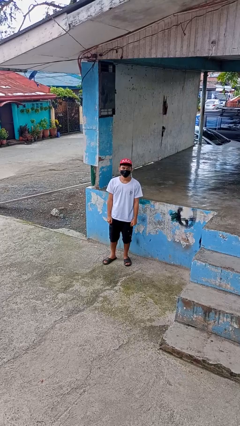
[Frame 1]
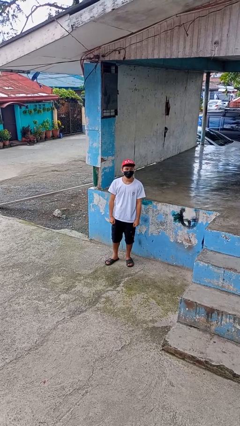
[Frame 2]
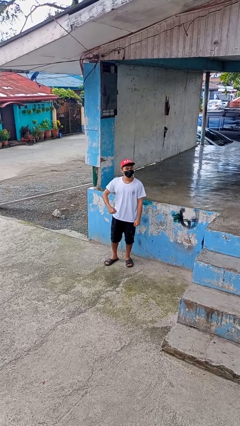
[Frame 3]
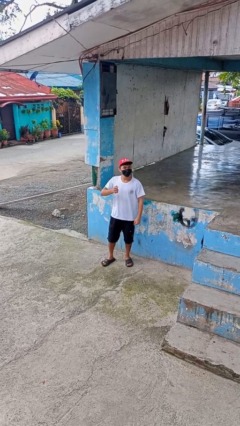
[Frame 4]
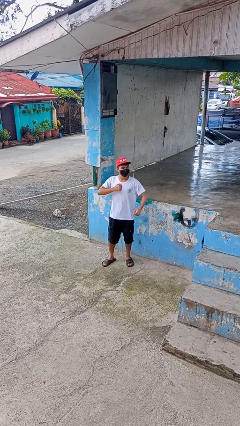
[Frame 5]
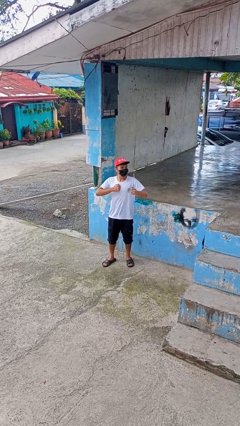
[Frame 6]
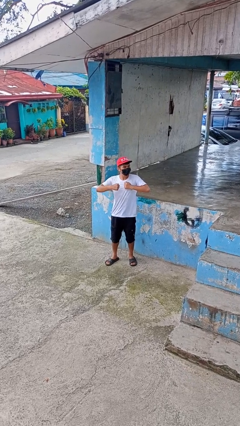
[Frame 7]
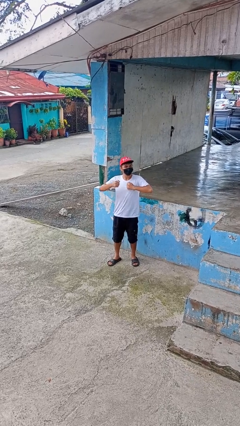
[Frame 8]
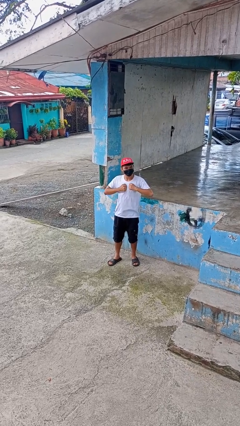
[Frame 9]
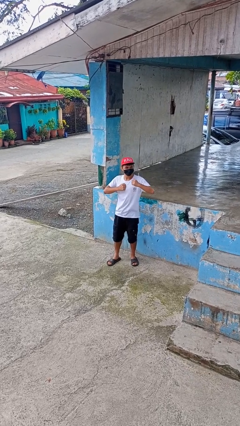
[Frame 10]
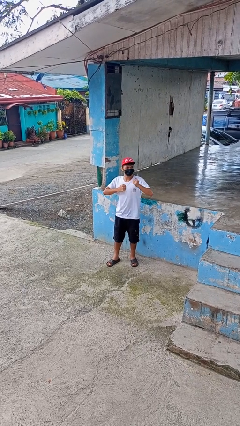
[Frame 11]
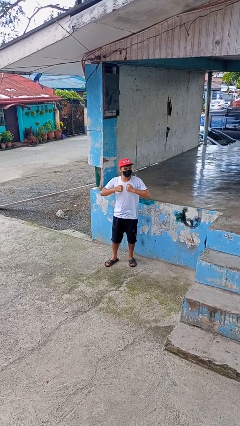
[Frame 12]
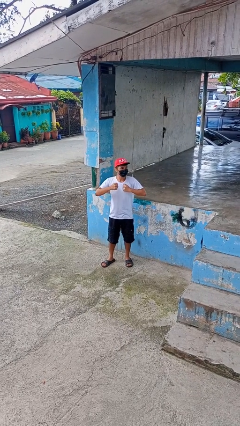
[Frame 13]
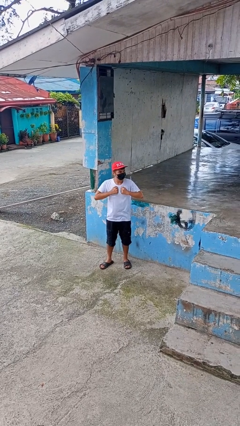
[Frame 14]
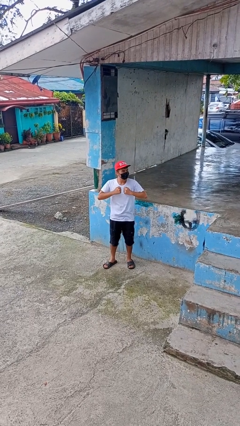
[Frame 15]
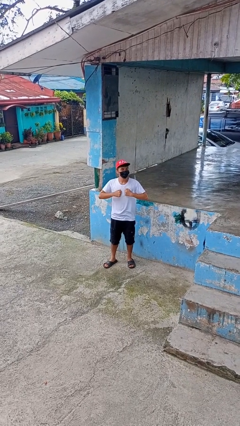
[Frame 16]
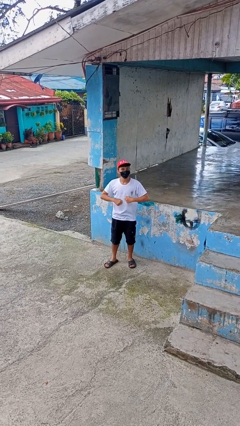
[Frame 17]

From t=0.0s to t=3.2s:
person drums on chest

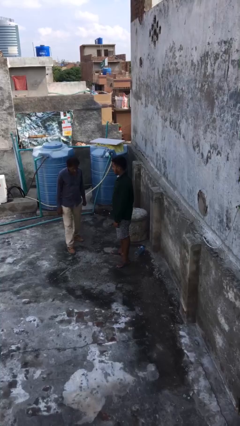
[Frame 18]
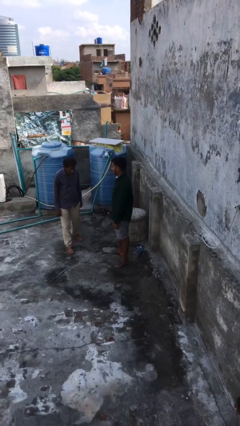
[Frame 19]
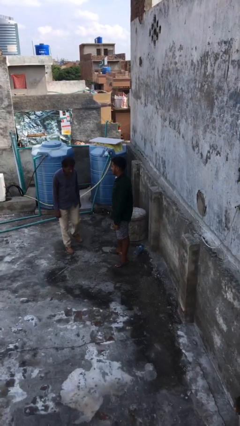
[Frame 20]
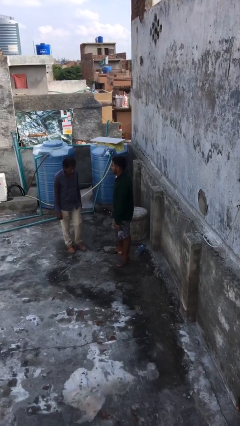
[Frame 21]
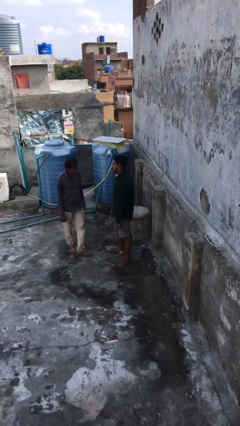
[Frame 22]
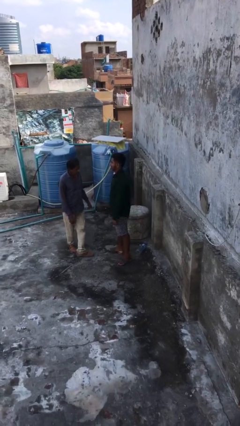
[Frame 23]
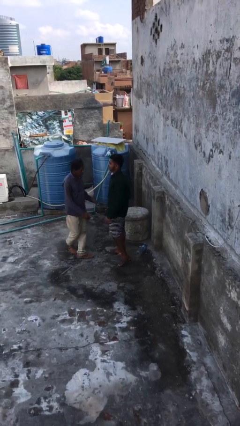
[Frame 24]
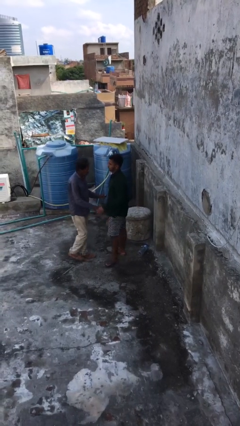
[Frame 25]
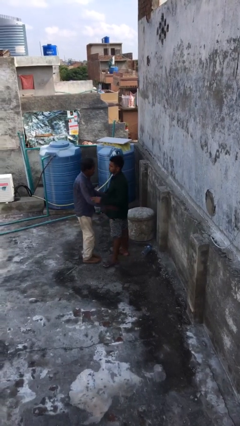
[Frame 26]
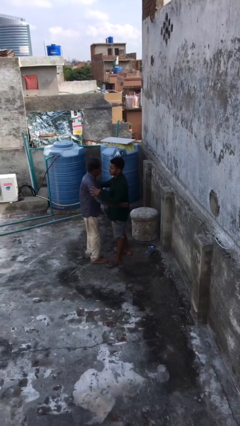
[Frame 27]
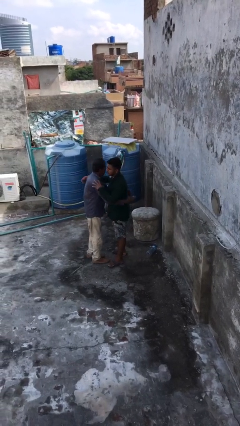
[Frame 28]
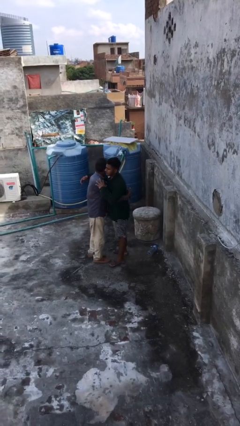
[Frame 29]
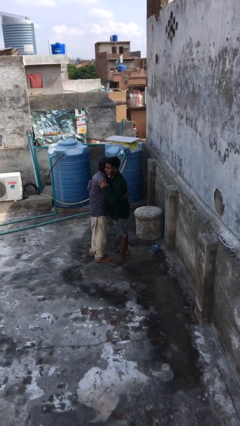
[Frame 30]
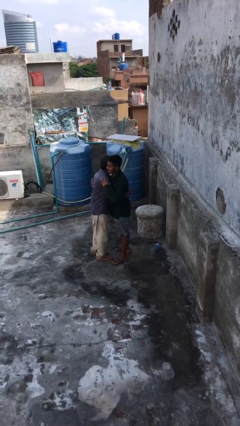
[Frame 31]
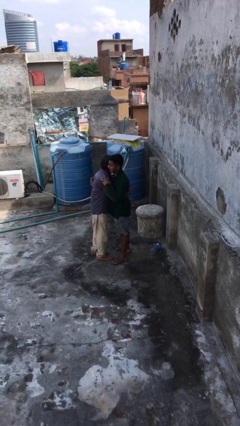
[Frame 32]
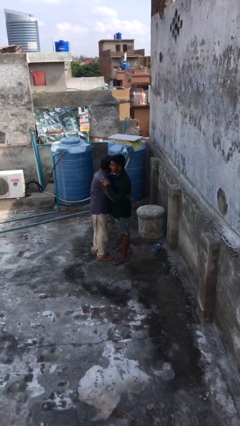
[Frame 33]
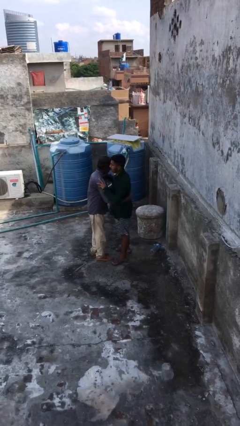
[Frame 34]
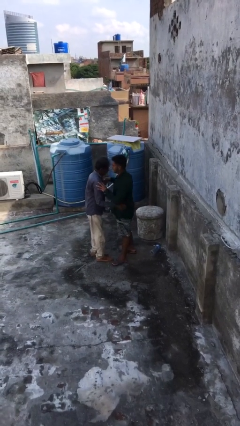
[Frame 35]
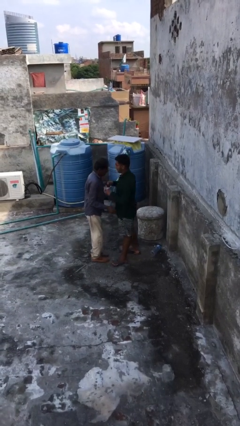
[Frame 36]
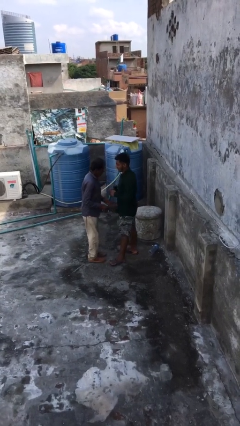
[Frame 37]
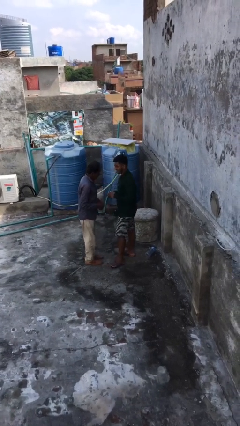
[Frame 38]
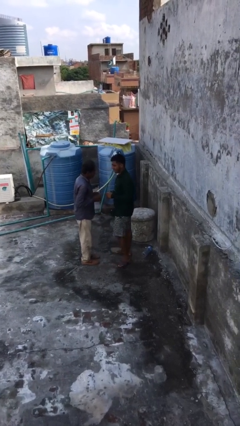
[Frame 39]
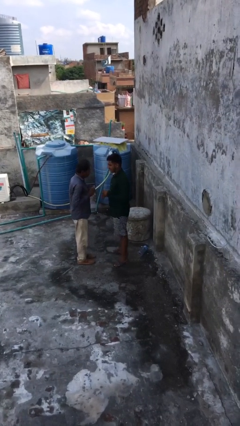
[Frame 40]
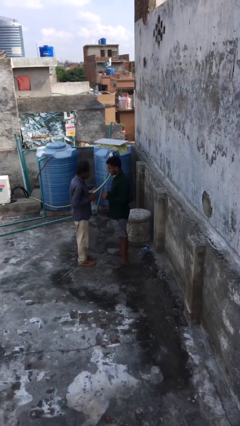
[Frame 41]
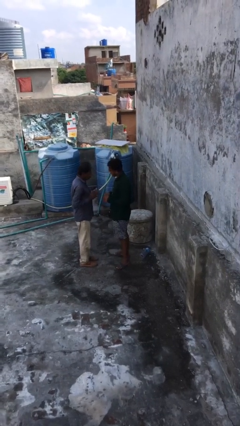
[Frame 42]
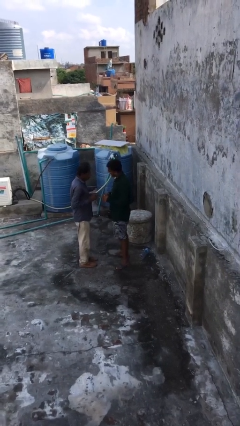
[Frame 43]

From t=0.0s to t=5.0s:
person embraces person

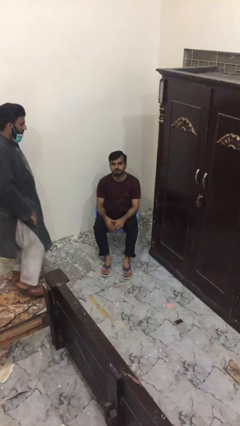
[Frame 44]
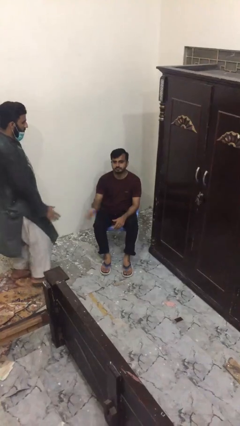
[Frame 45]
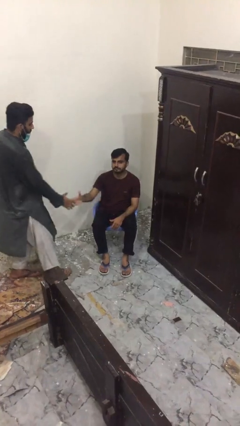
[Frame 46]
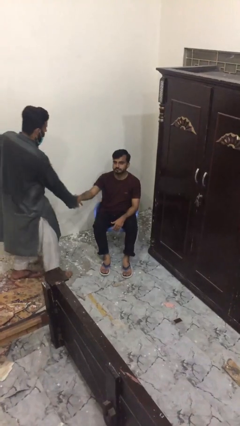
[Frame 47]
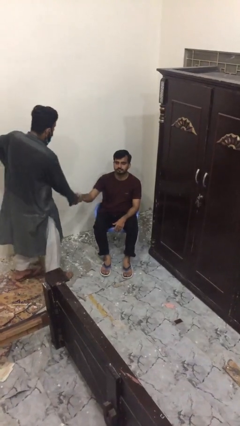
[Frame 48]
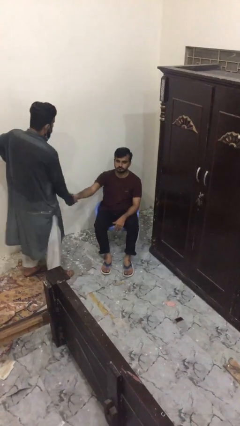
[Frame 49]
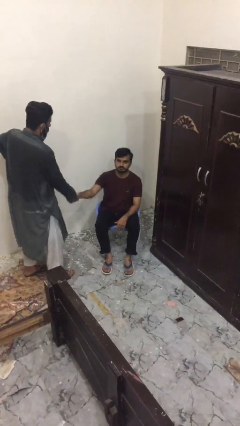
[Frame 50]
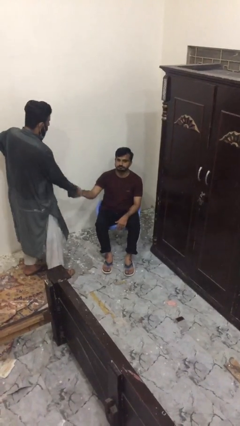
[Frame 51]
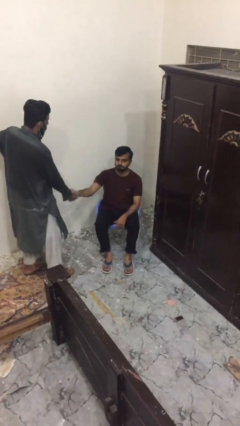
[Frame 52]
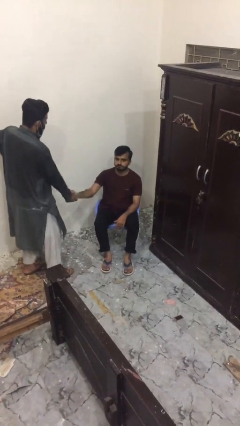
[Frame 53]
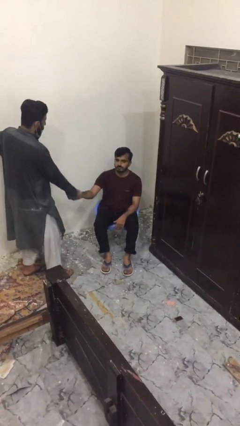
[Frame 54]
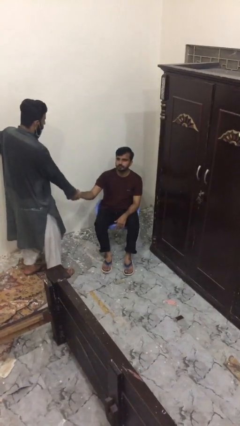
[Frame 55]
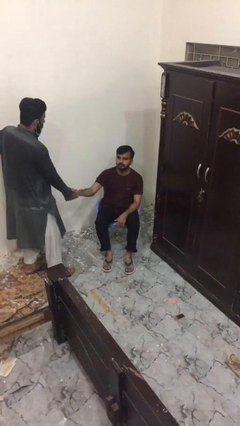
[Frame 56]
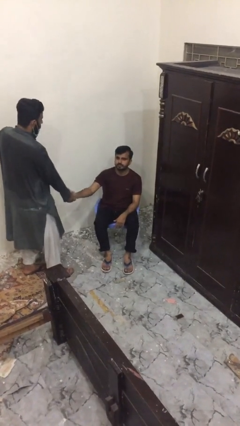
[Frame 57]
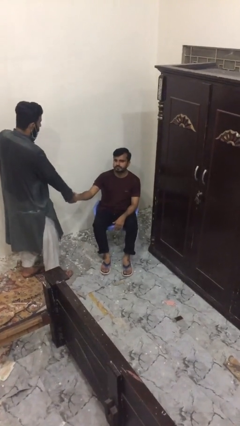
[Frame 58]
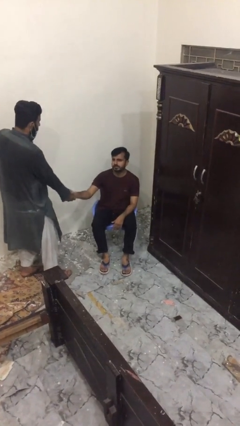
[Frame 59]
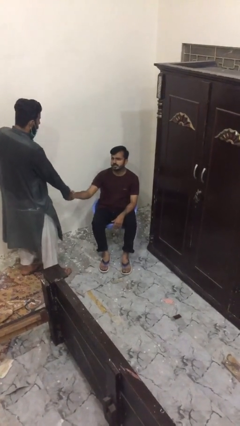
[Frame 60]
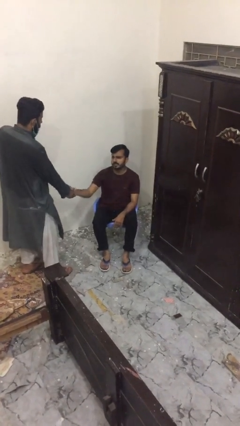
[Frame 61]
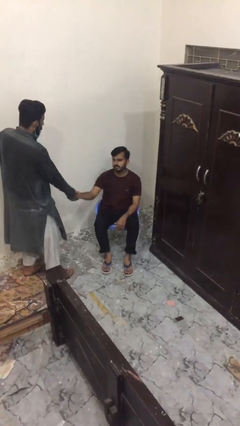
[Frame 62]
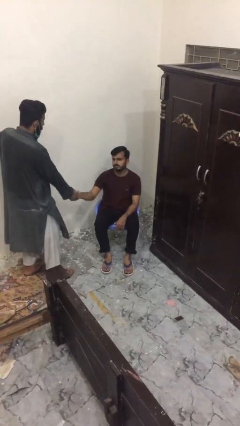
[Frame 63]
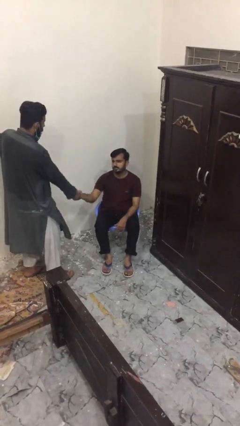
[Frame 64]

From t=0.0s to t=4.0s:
person shakes hand

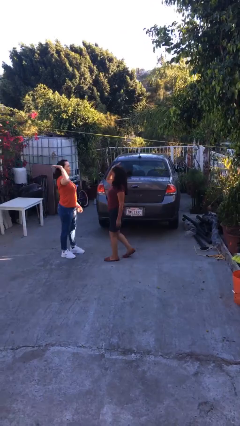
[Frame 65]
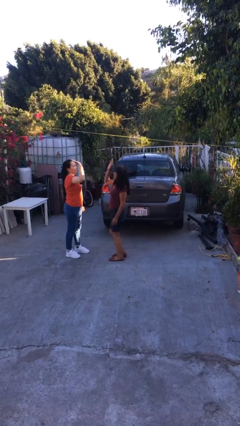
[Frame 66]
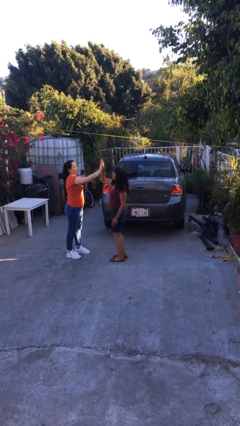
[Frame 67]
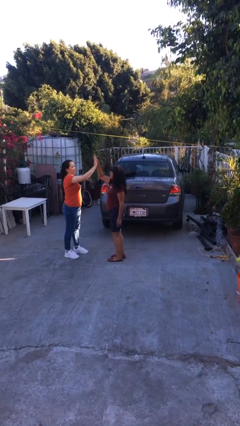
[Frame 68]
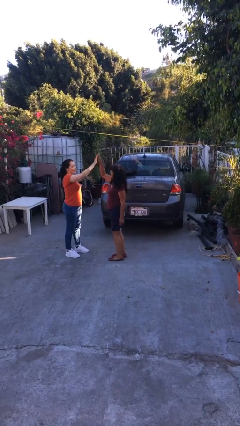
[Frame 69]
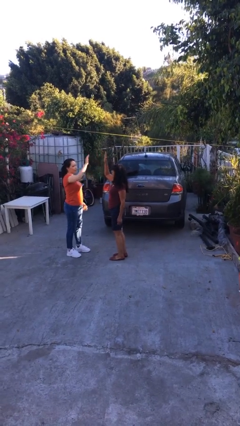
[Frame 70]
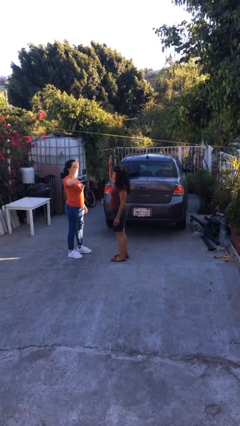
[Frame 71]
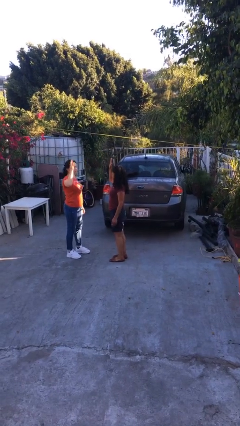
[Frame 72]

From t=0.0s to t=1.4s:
person highfives hand

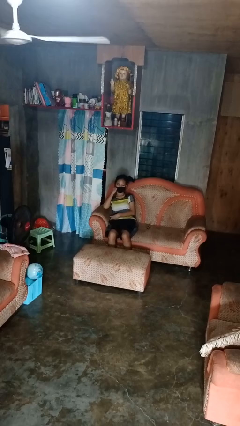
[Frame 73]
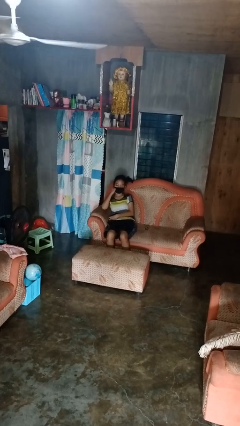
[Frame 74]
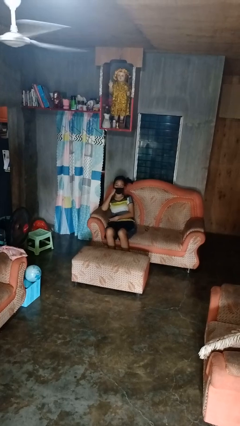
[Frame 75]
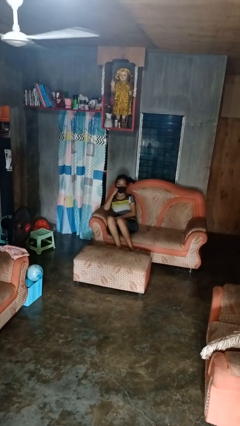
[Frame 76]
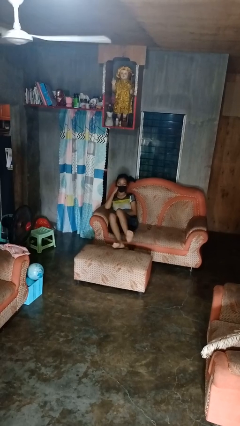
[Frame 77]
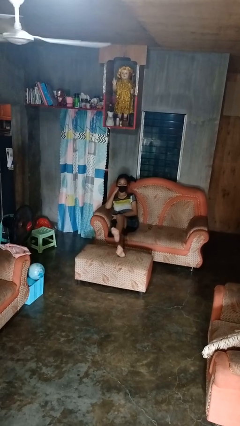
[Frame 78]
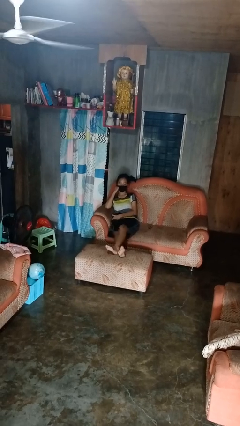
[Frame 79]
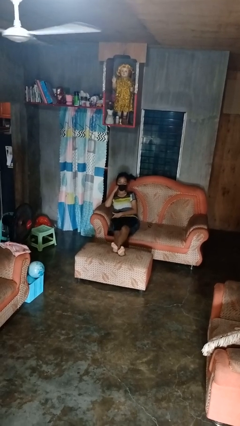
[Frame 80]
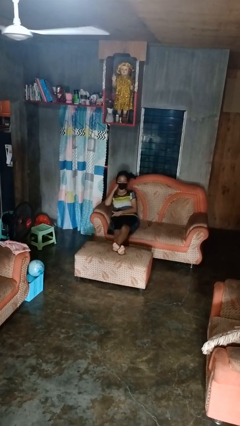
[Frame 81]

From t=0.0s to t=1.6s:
person puts feet up

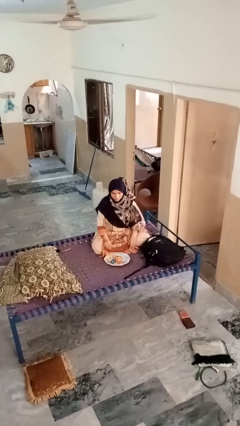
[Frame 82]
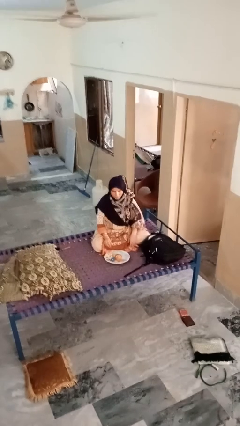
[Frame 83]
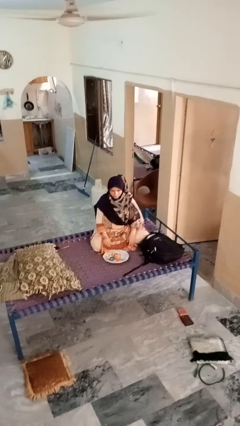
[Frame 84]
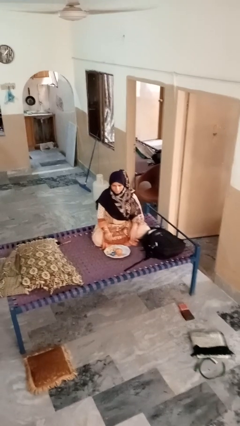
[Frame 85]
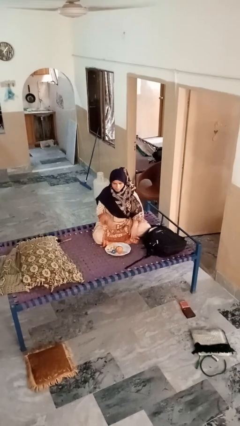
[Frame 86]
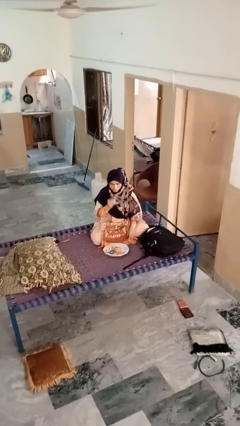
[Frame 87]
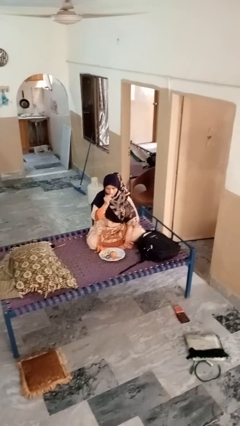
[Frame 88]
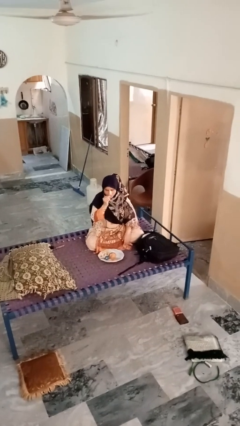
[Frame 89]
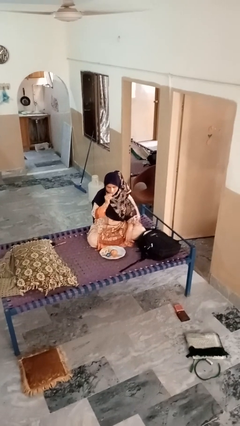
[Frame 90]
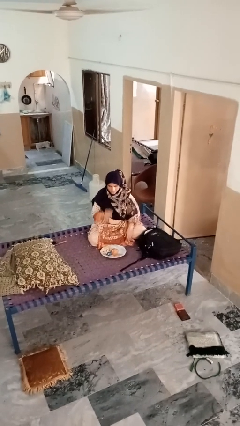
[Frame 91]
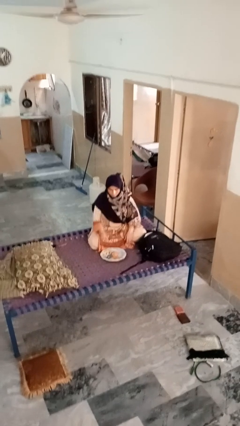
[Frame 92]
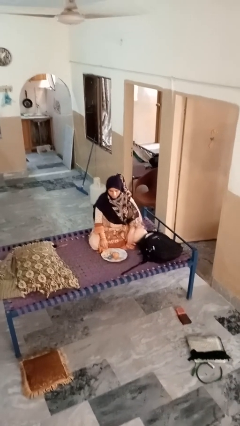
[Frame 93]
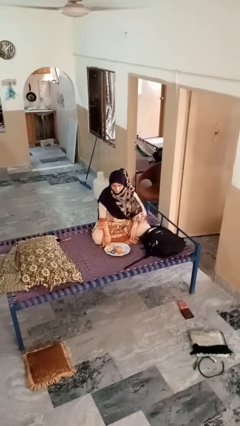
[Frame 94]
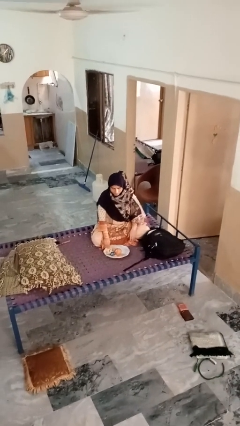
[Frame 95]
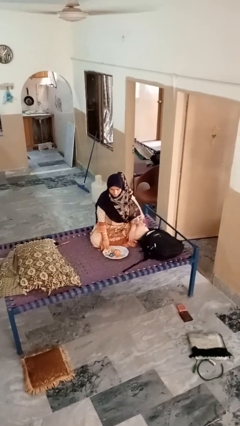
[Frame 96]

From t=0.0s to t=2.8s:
person eats apple
